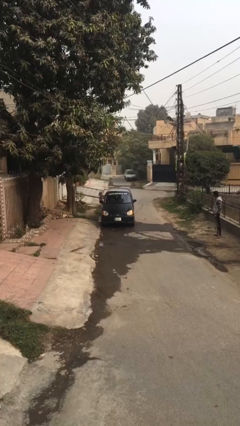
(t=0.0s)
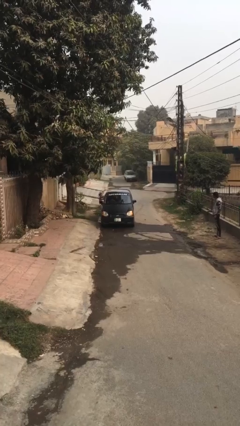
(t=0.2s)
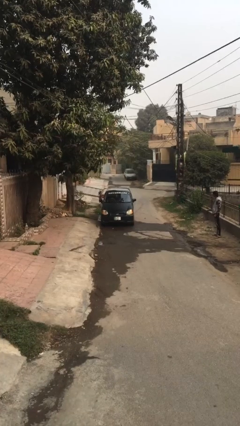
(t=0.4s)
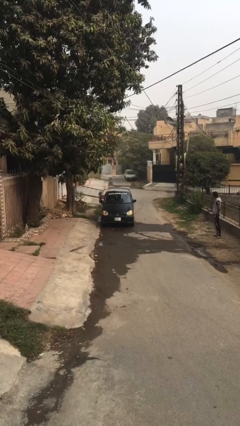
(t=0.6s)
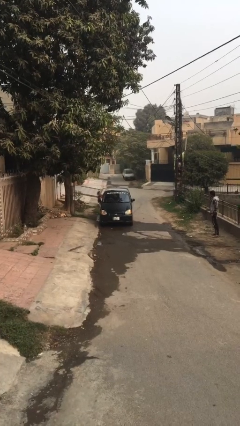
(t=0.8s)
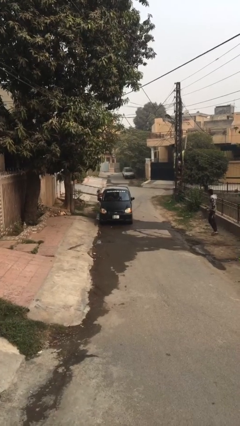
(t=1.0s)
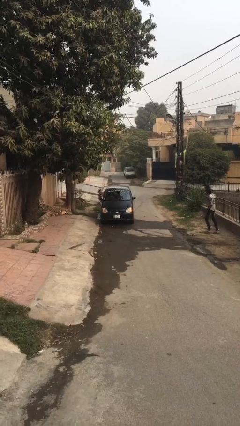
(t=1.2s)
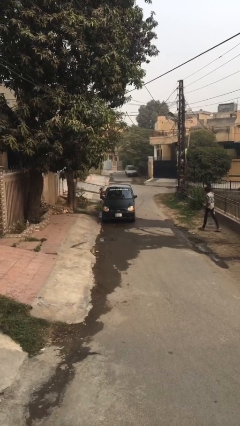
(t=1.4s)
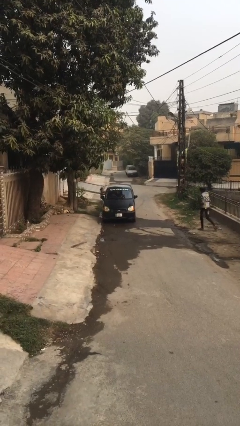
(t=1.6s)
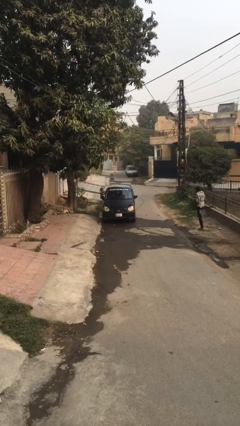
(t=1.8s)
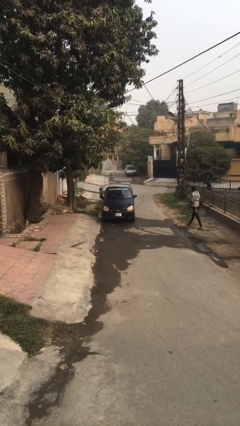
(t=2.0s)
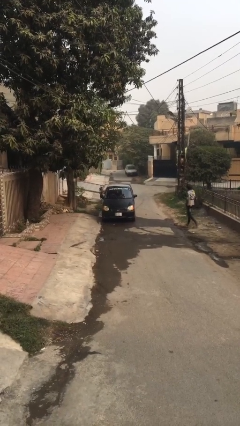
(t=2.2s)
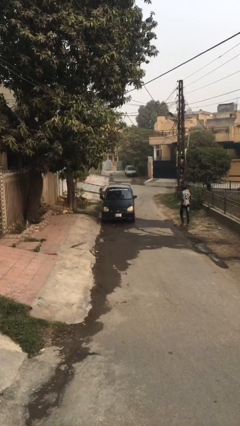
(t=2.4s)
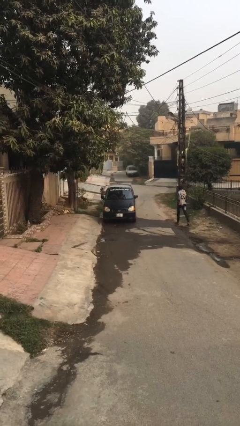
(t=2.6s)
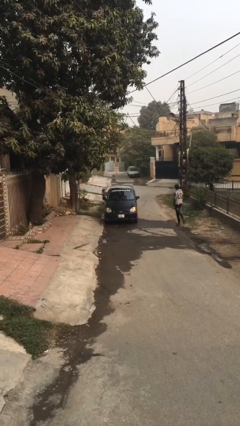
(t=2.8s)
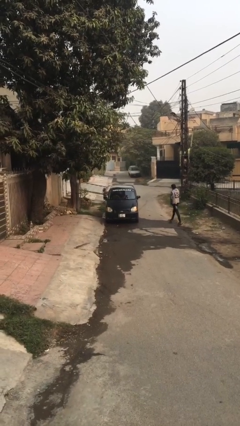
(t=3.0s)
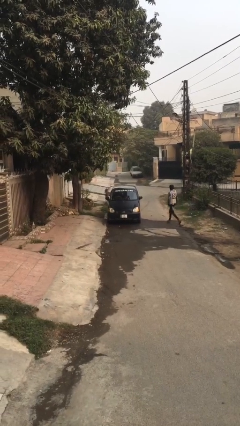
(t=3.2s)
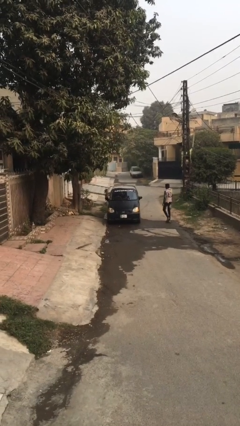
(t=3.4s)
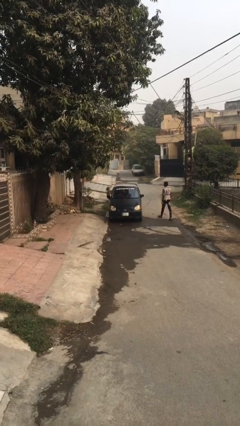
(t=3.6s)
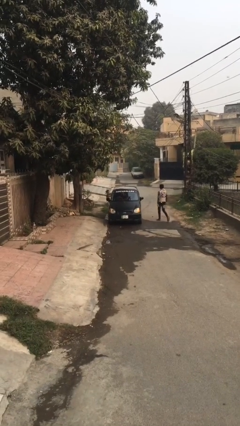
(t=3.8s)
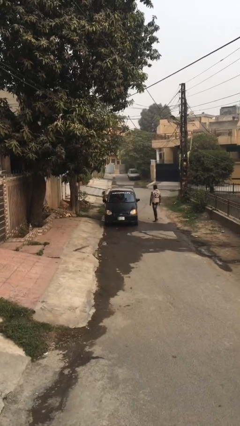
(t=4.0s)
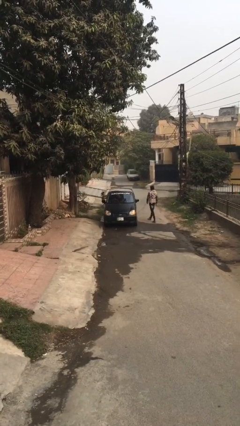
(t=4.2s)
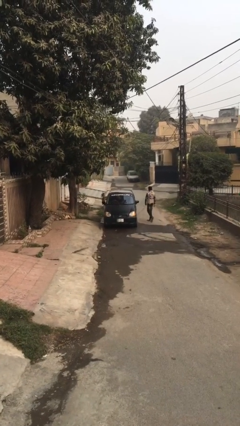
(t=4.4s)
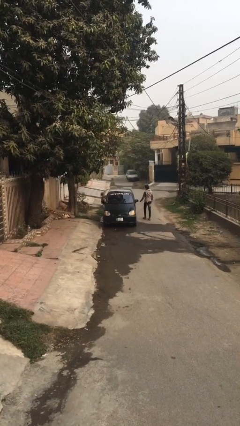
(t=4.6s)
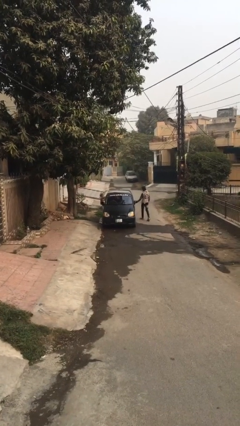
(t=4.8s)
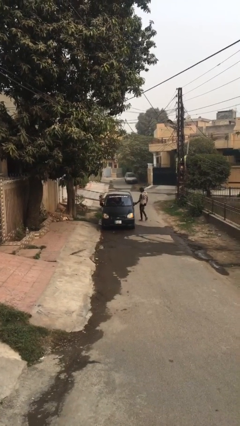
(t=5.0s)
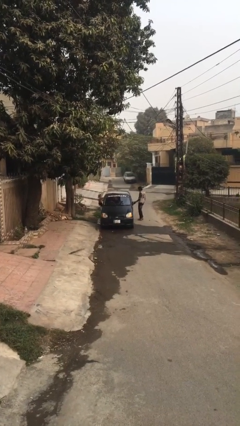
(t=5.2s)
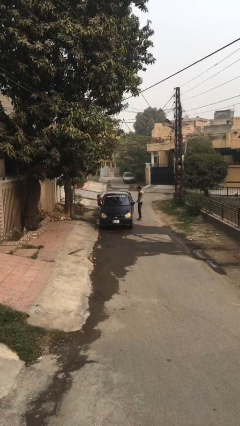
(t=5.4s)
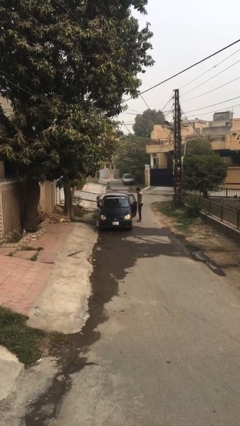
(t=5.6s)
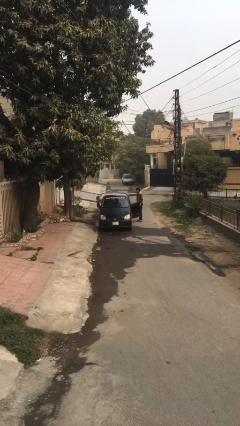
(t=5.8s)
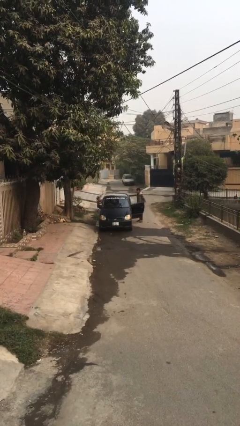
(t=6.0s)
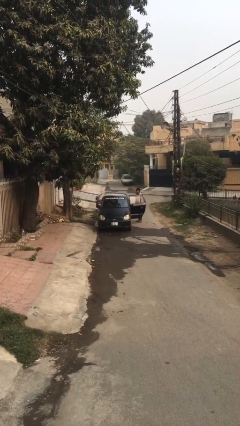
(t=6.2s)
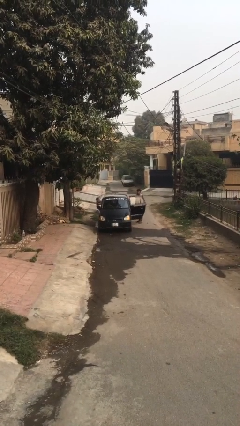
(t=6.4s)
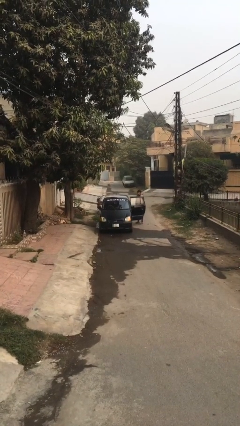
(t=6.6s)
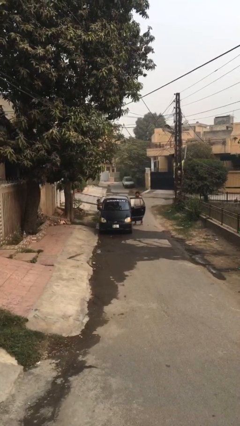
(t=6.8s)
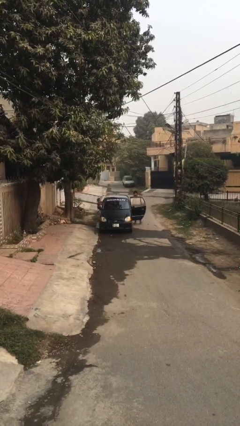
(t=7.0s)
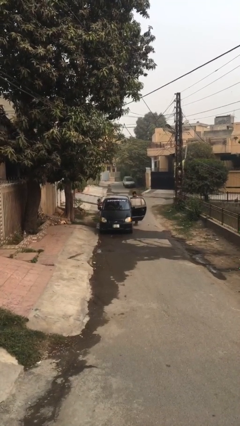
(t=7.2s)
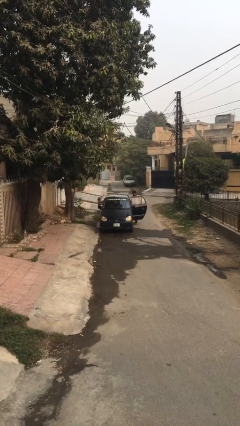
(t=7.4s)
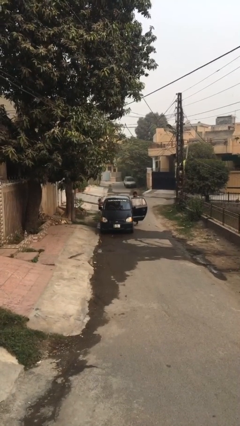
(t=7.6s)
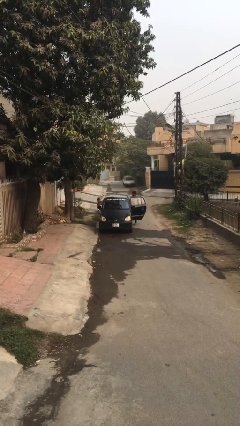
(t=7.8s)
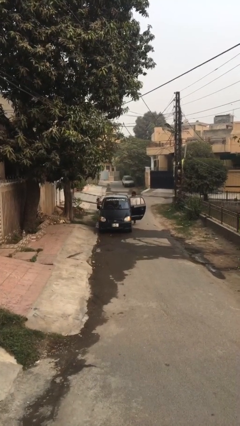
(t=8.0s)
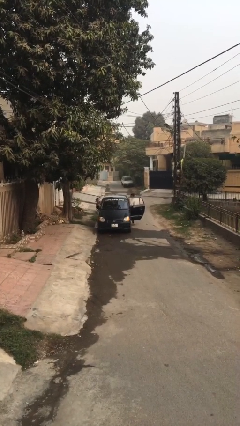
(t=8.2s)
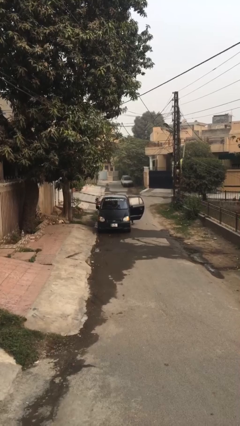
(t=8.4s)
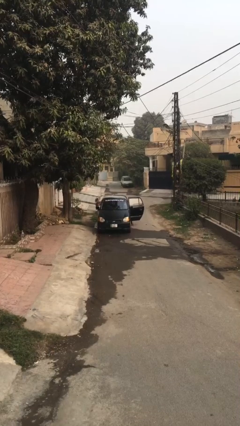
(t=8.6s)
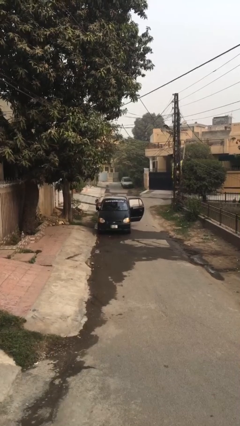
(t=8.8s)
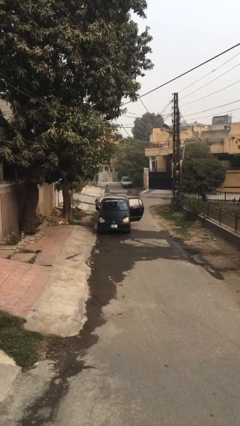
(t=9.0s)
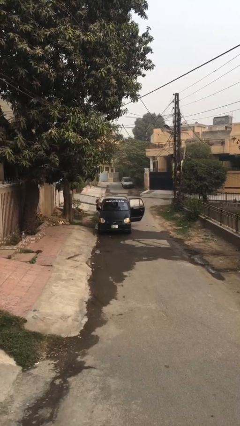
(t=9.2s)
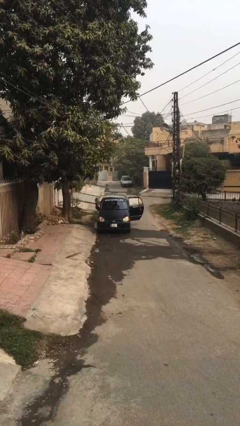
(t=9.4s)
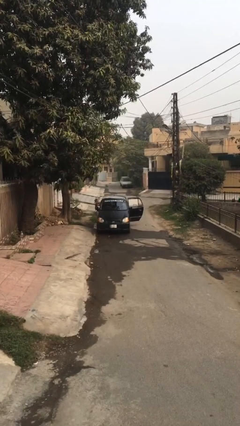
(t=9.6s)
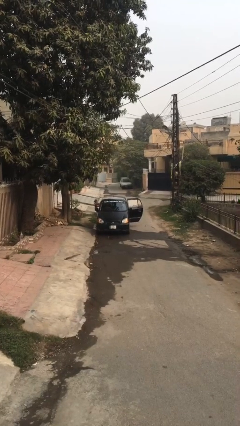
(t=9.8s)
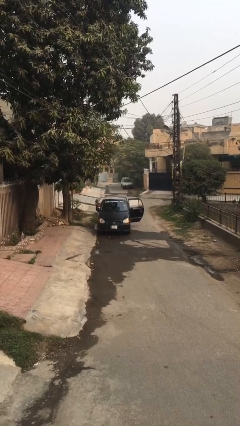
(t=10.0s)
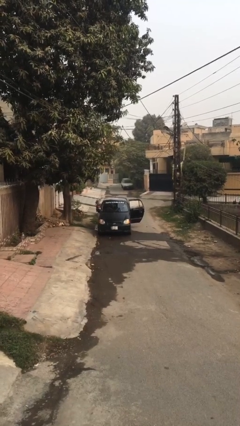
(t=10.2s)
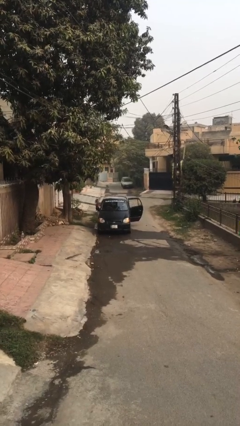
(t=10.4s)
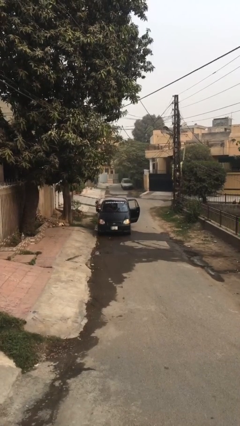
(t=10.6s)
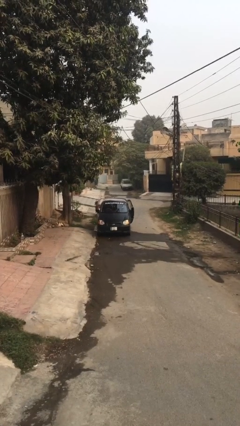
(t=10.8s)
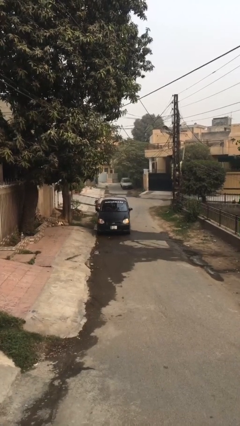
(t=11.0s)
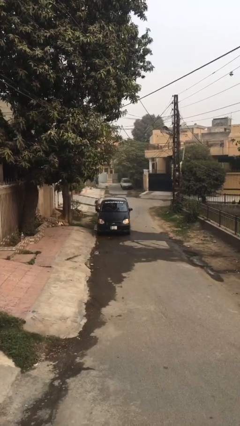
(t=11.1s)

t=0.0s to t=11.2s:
car picks up person

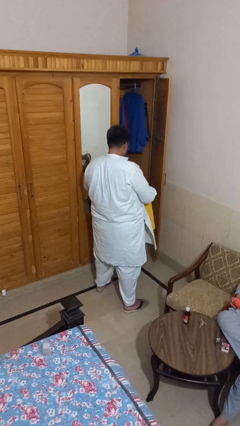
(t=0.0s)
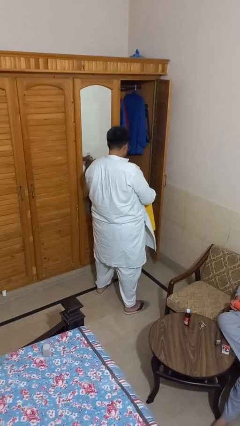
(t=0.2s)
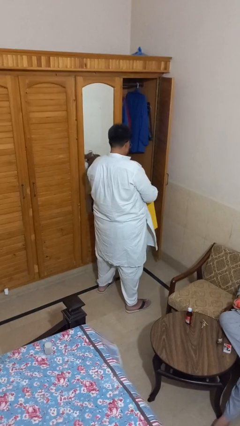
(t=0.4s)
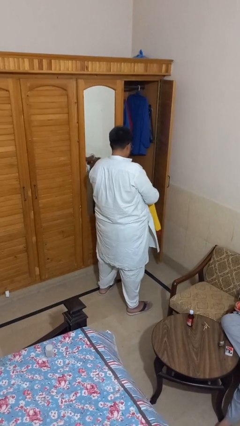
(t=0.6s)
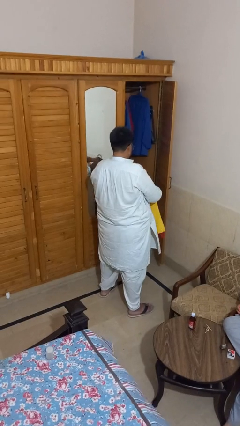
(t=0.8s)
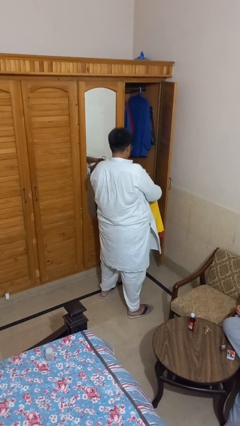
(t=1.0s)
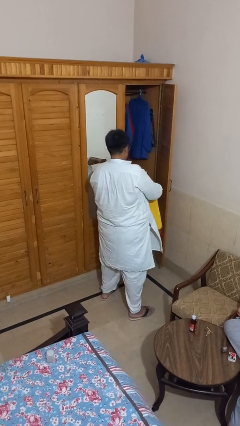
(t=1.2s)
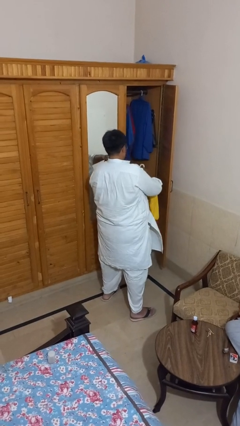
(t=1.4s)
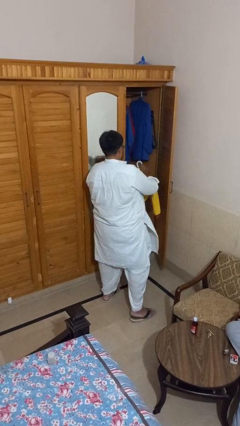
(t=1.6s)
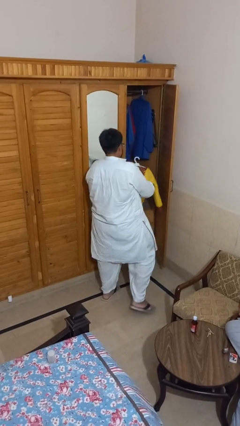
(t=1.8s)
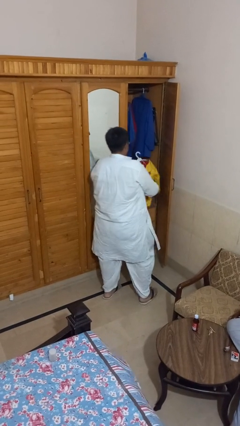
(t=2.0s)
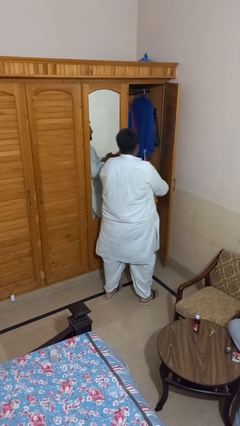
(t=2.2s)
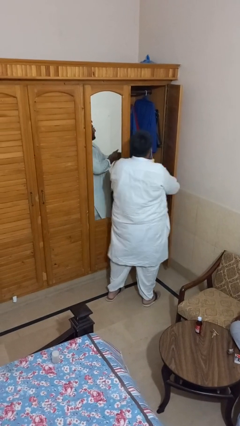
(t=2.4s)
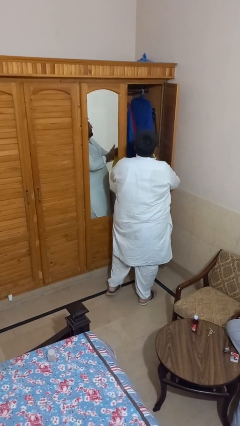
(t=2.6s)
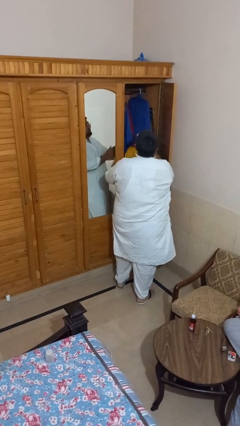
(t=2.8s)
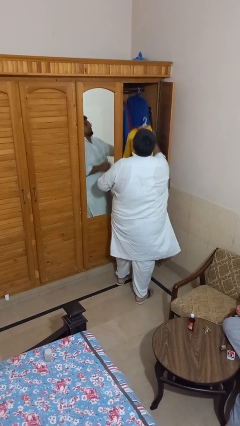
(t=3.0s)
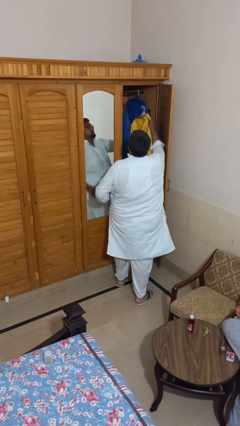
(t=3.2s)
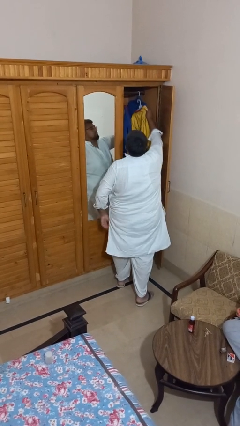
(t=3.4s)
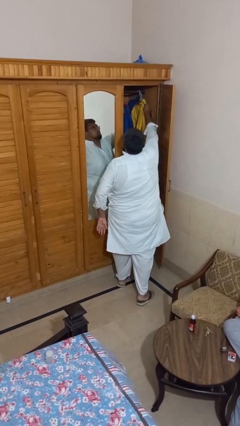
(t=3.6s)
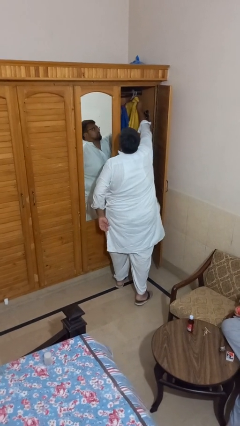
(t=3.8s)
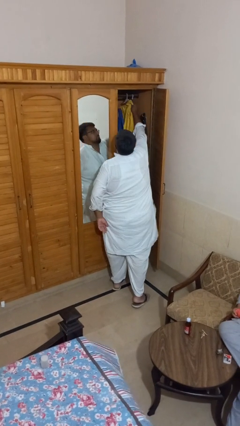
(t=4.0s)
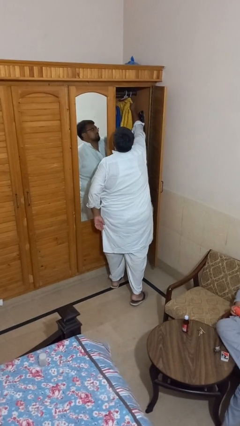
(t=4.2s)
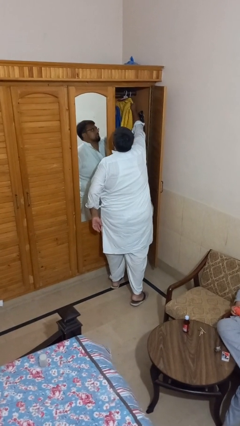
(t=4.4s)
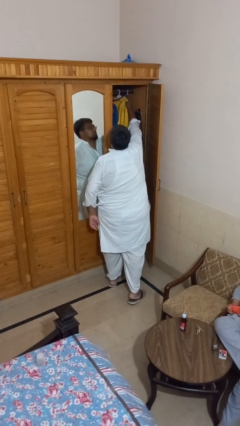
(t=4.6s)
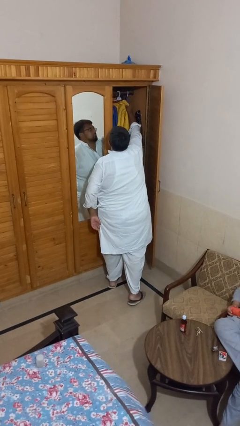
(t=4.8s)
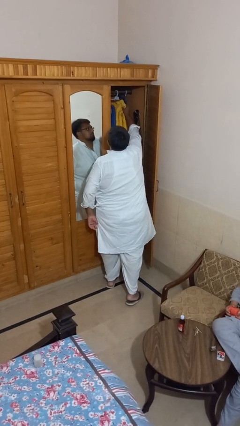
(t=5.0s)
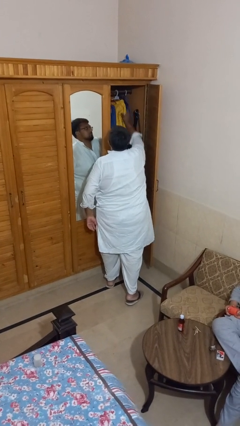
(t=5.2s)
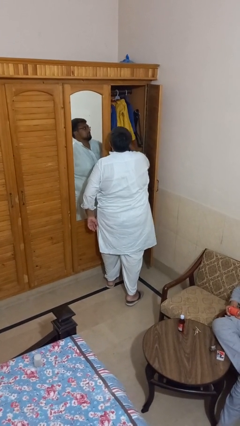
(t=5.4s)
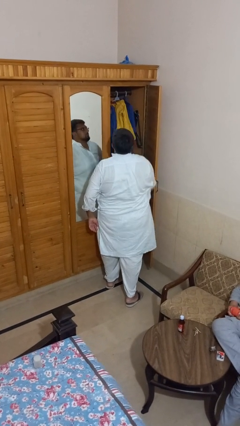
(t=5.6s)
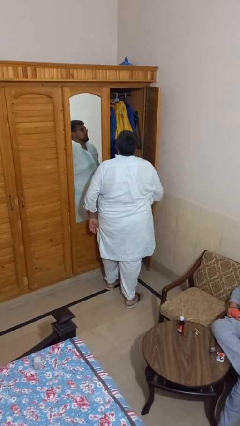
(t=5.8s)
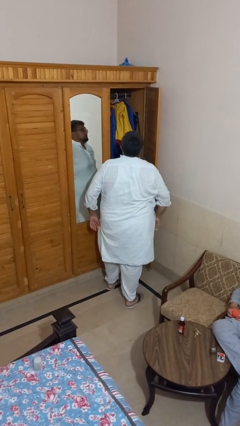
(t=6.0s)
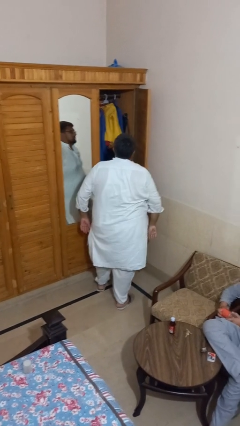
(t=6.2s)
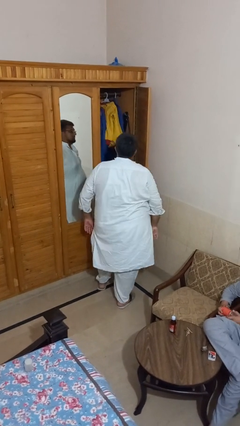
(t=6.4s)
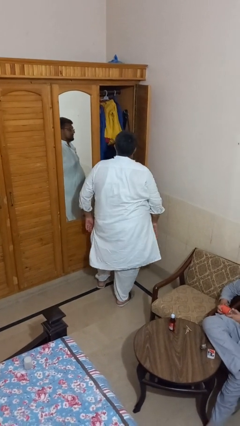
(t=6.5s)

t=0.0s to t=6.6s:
person puts clothes into closet

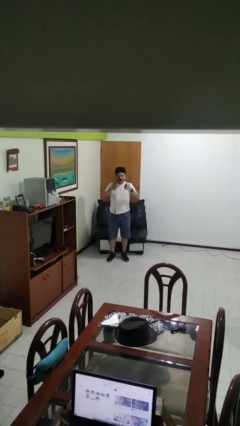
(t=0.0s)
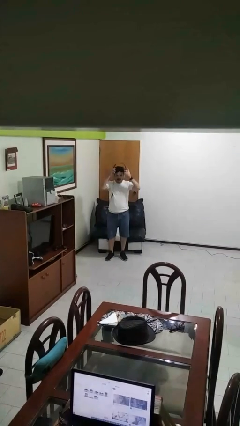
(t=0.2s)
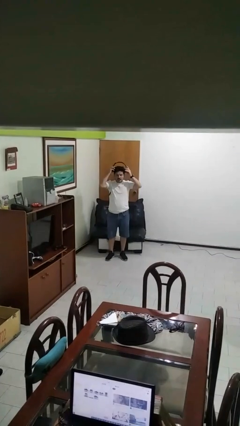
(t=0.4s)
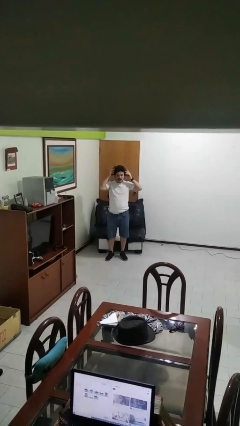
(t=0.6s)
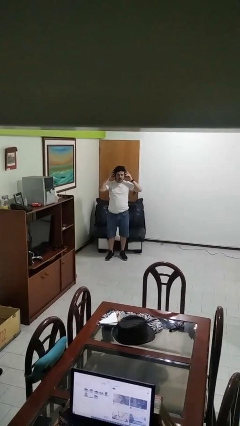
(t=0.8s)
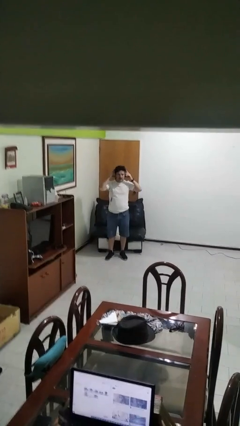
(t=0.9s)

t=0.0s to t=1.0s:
person puts on headphones
